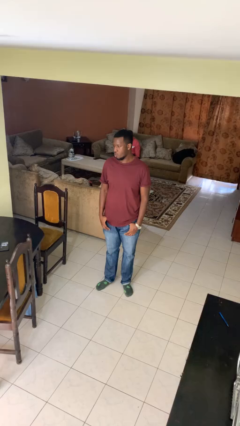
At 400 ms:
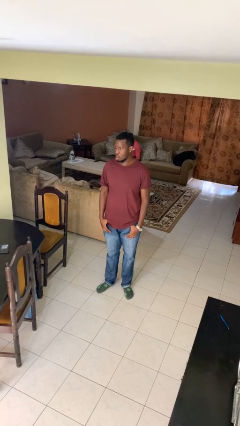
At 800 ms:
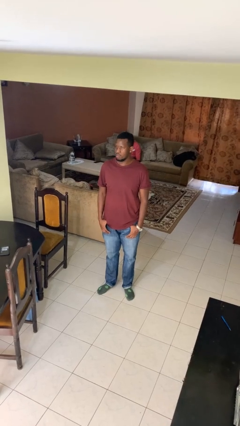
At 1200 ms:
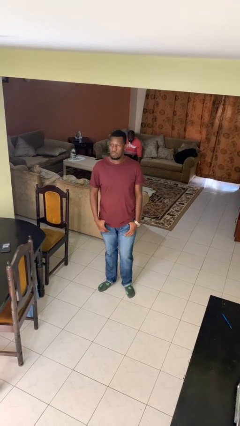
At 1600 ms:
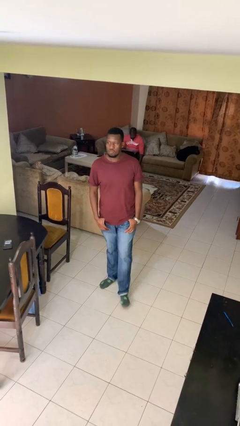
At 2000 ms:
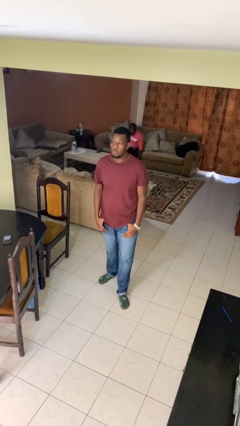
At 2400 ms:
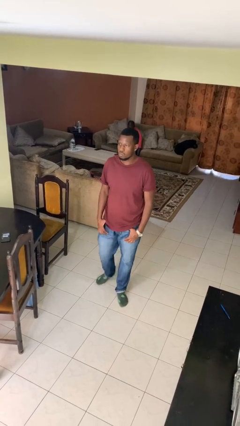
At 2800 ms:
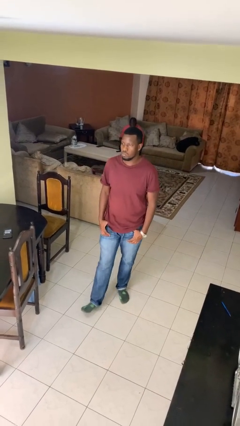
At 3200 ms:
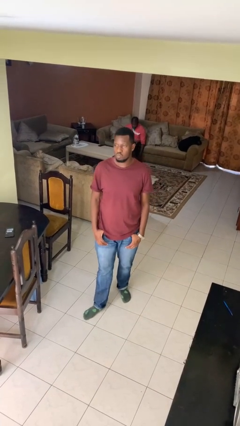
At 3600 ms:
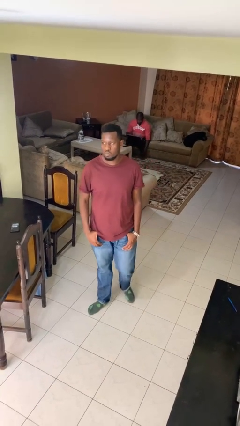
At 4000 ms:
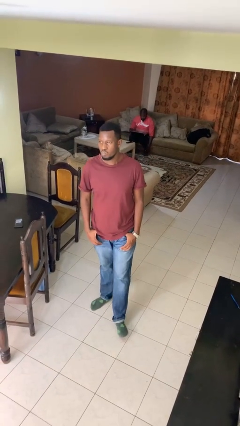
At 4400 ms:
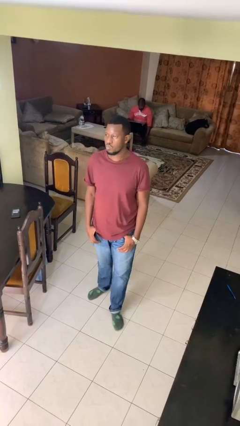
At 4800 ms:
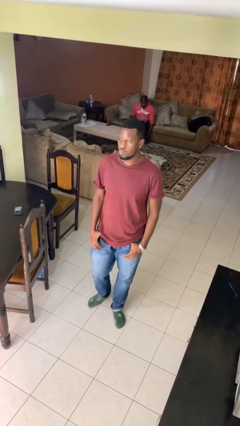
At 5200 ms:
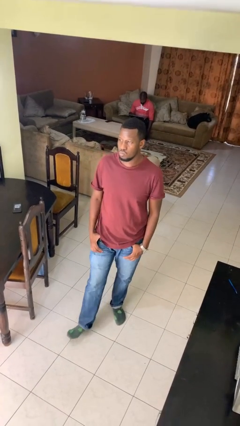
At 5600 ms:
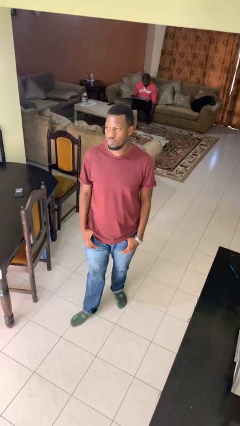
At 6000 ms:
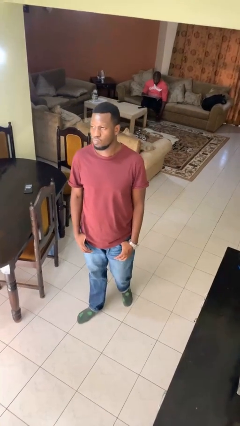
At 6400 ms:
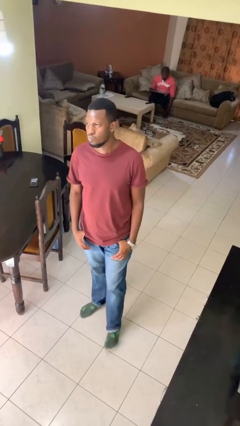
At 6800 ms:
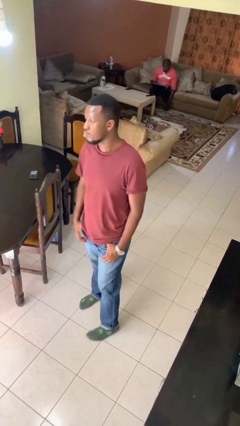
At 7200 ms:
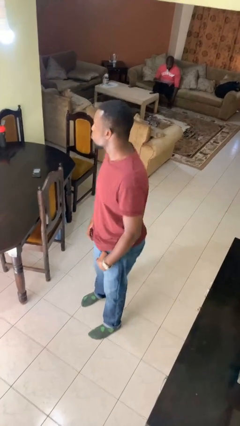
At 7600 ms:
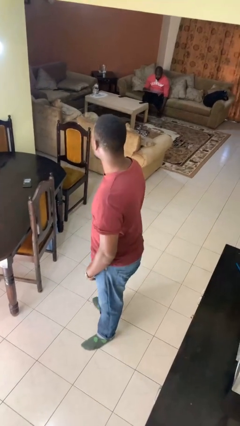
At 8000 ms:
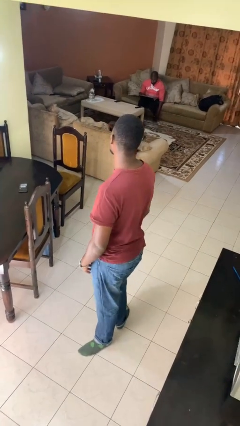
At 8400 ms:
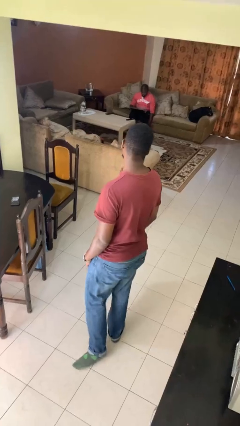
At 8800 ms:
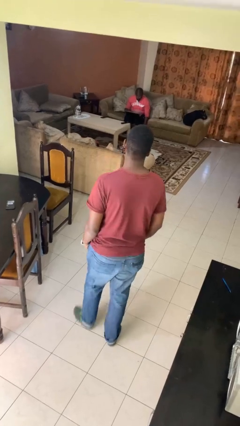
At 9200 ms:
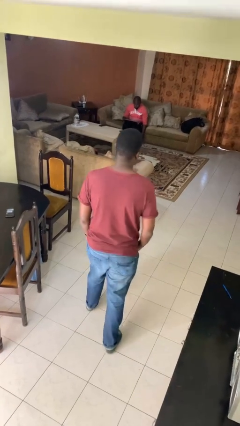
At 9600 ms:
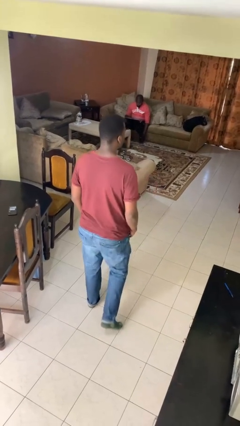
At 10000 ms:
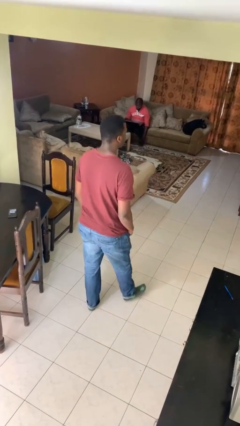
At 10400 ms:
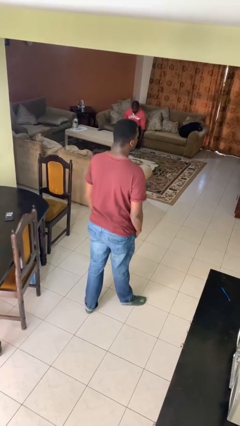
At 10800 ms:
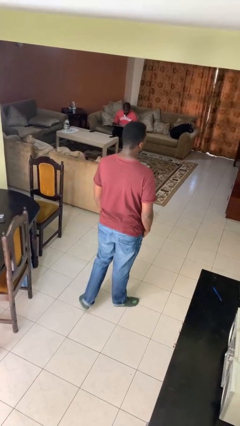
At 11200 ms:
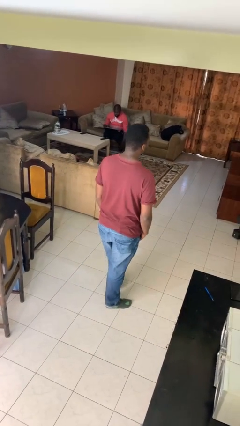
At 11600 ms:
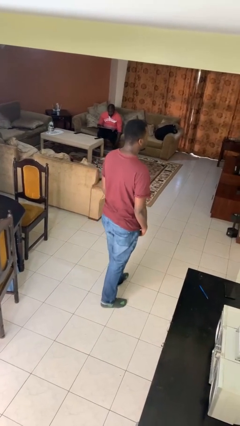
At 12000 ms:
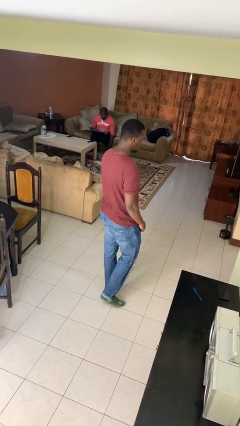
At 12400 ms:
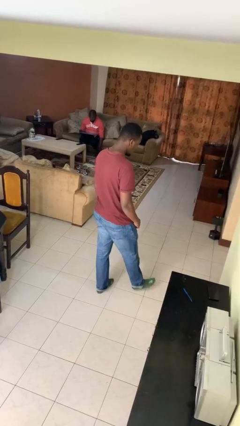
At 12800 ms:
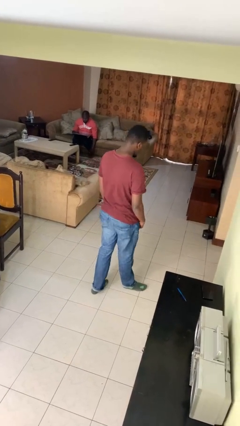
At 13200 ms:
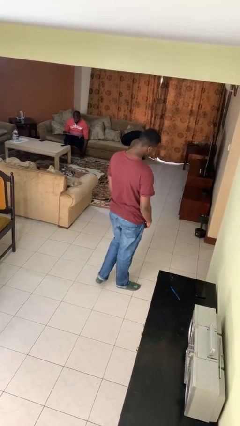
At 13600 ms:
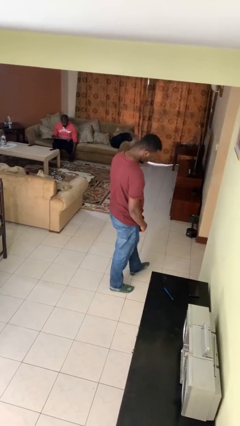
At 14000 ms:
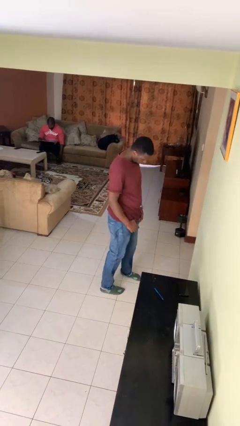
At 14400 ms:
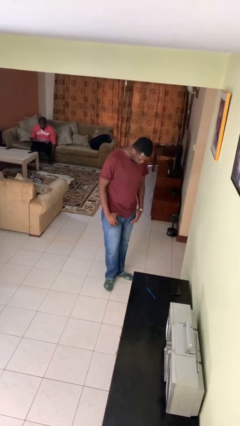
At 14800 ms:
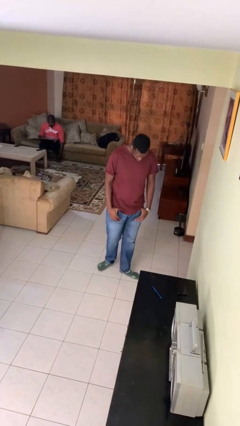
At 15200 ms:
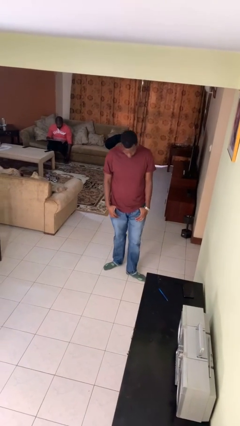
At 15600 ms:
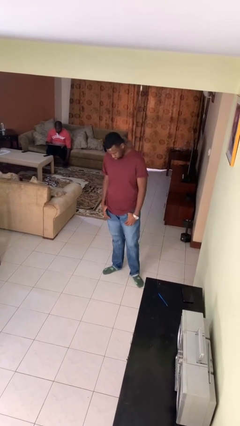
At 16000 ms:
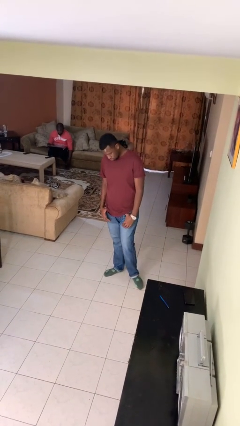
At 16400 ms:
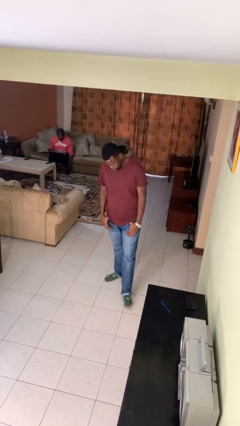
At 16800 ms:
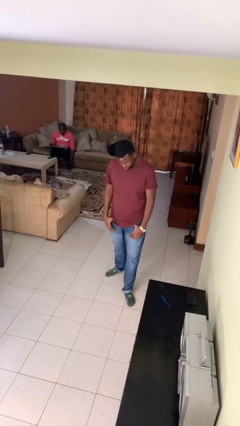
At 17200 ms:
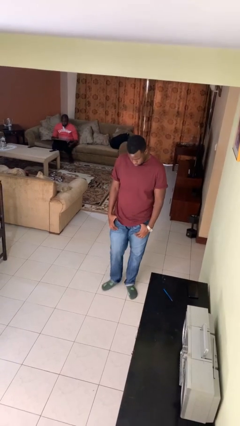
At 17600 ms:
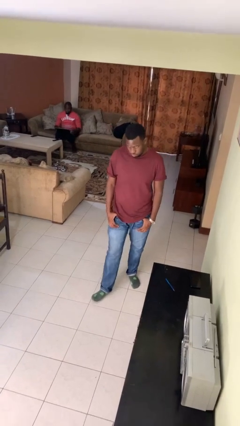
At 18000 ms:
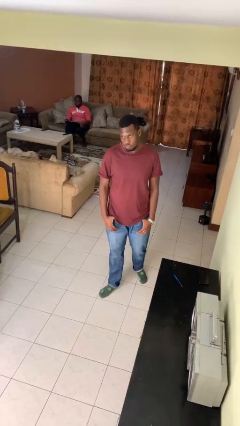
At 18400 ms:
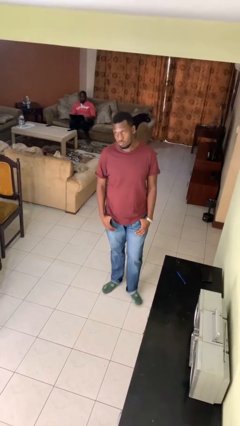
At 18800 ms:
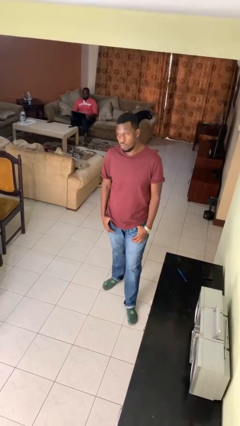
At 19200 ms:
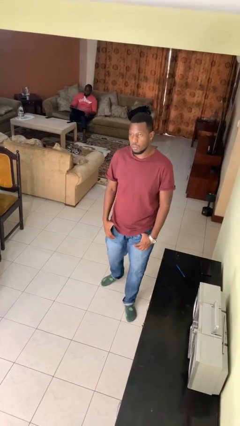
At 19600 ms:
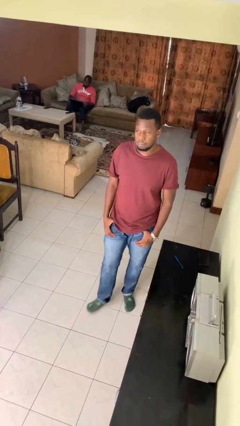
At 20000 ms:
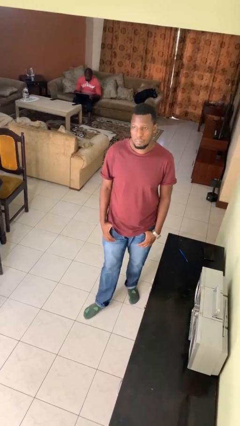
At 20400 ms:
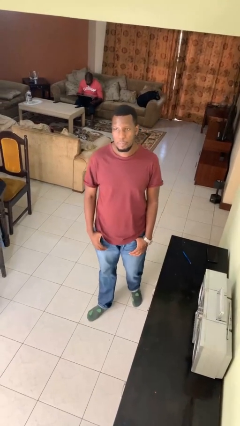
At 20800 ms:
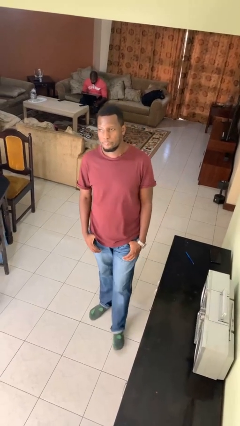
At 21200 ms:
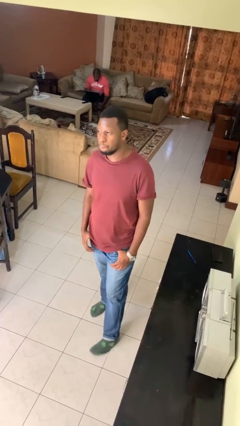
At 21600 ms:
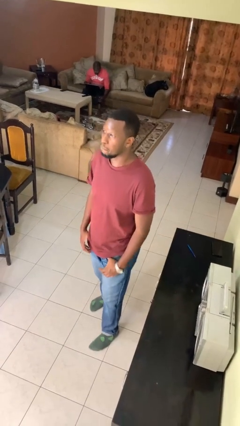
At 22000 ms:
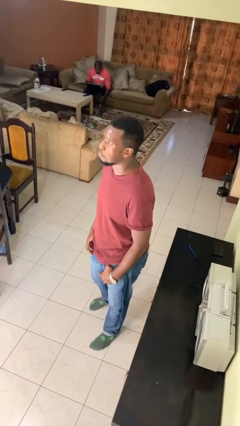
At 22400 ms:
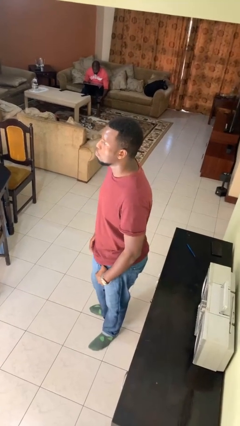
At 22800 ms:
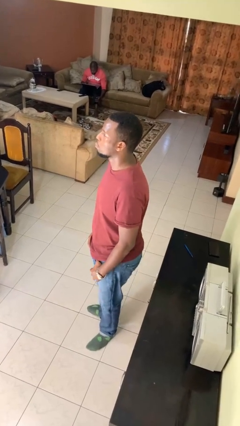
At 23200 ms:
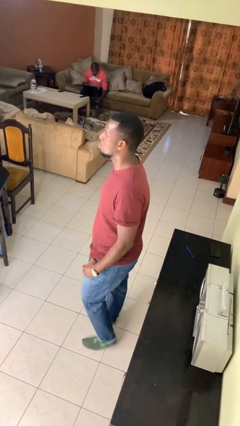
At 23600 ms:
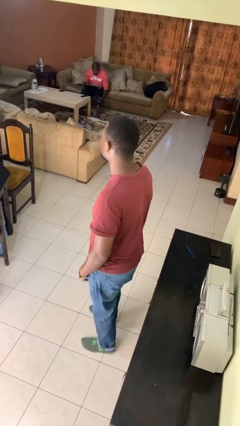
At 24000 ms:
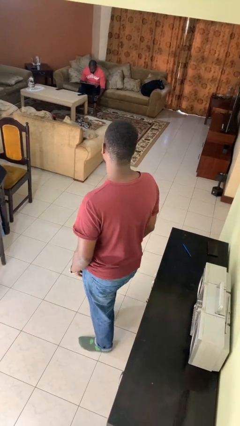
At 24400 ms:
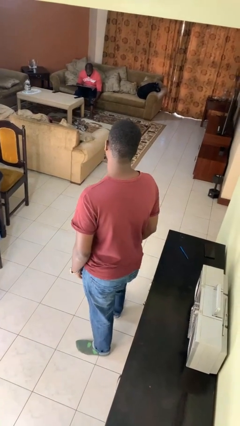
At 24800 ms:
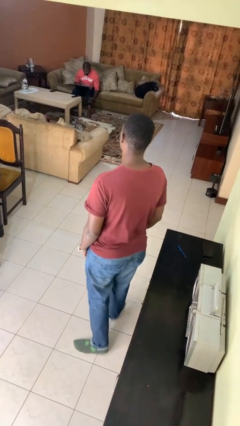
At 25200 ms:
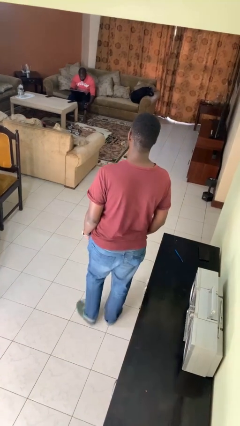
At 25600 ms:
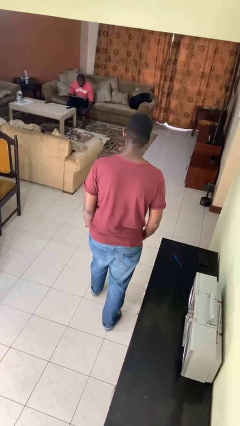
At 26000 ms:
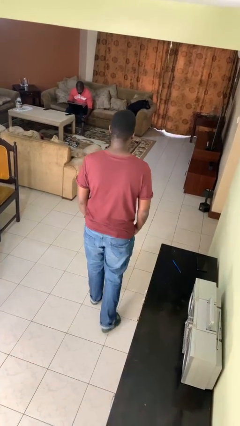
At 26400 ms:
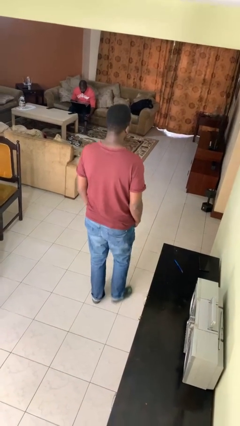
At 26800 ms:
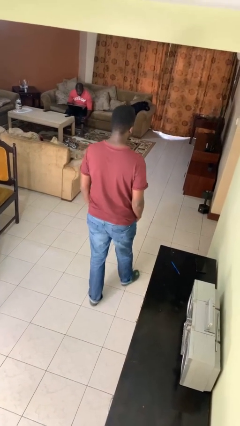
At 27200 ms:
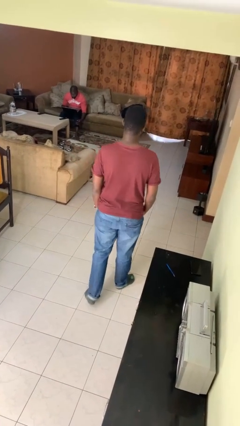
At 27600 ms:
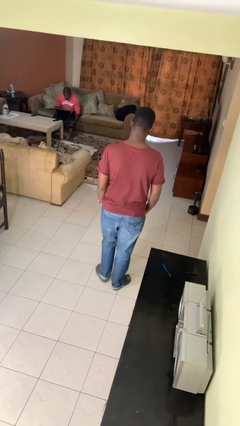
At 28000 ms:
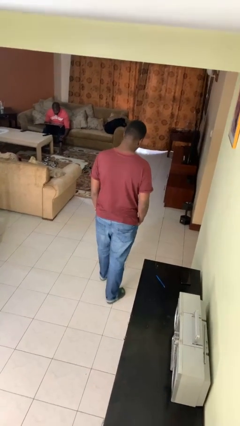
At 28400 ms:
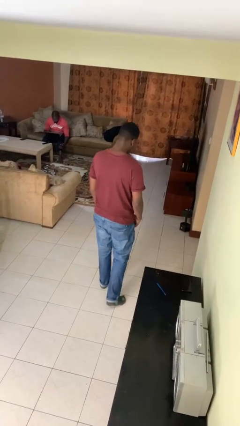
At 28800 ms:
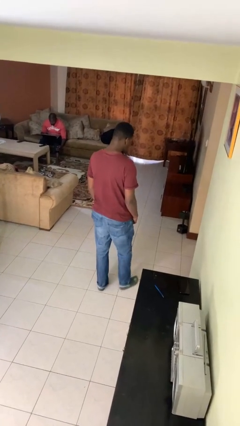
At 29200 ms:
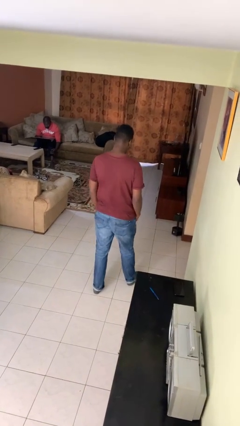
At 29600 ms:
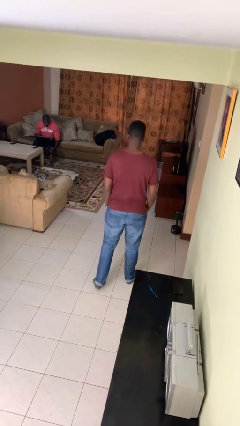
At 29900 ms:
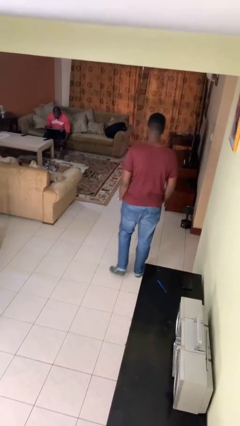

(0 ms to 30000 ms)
person walks

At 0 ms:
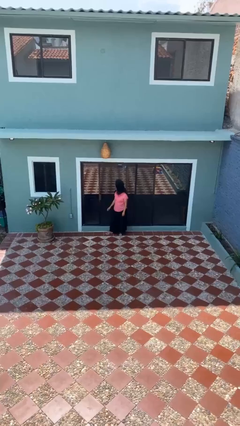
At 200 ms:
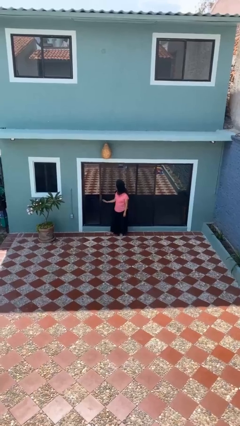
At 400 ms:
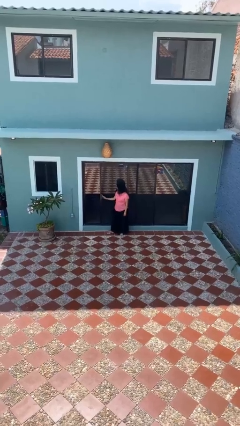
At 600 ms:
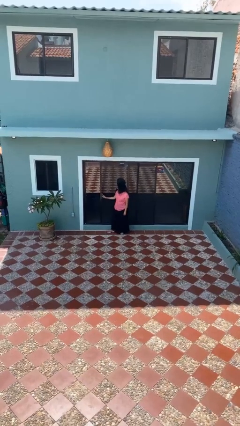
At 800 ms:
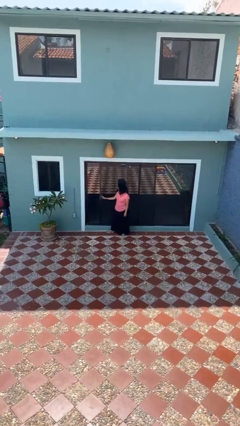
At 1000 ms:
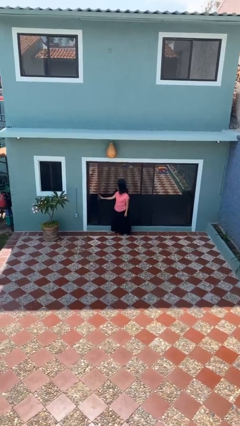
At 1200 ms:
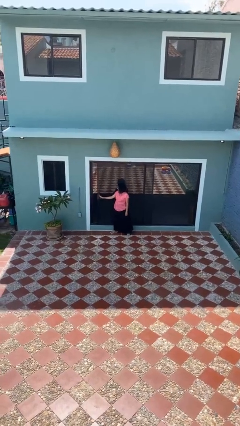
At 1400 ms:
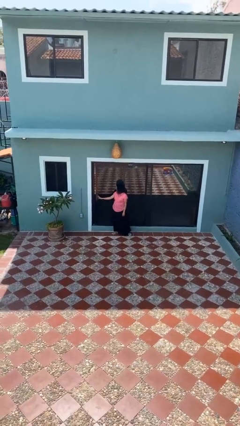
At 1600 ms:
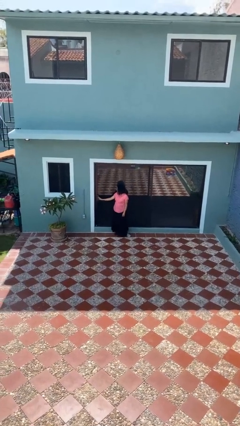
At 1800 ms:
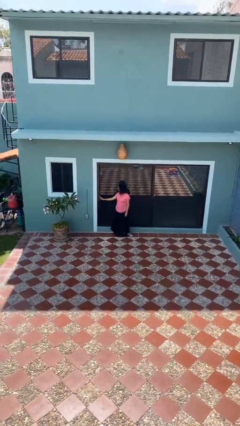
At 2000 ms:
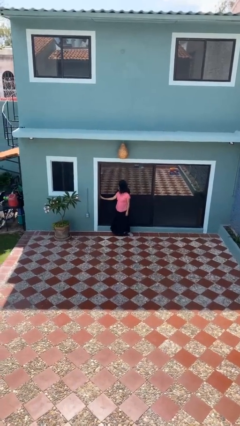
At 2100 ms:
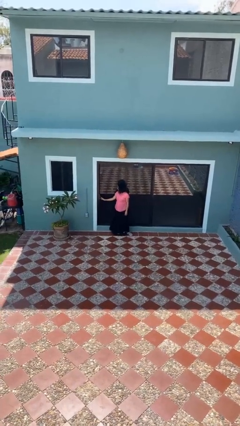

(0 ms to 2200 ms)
person closes sliding door

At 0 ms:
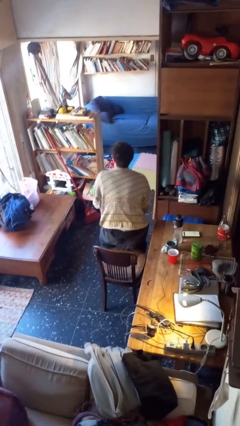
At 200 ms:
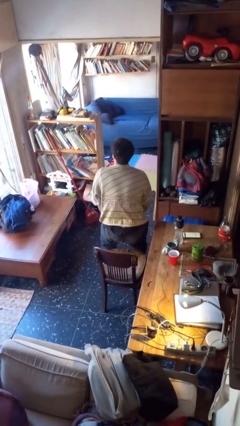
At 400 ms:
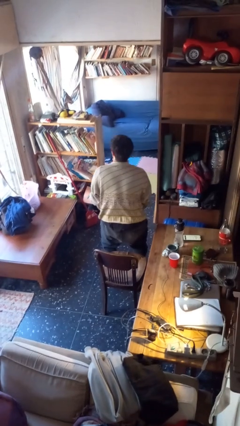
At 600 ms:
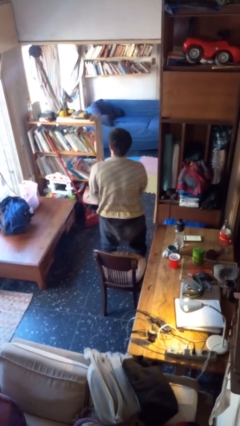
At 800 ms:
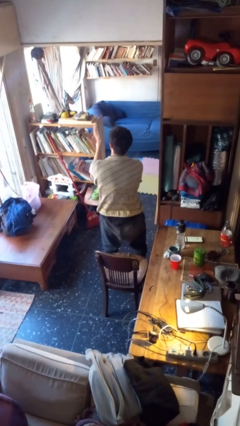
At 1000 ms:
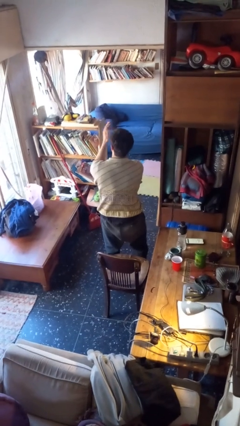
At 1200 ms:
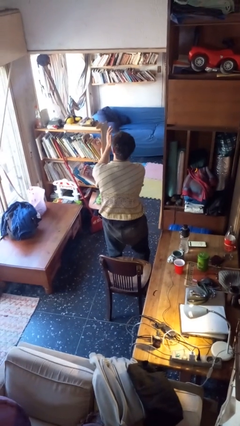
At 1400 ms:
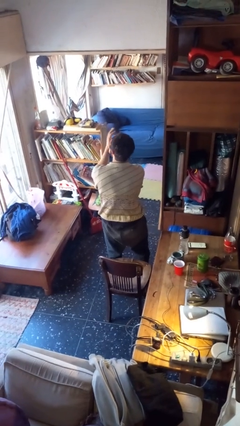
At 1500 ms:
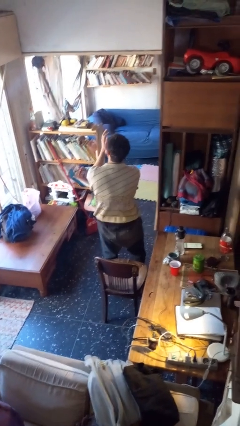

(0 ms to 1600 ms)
person claps hands
